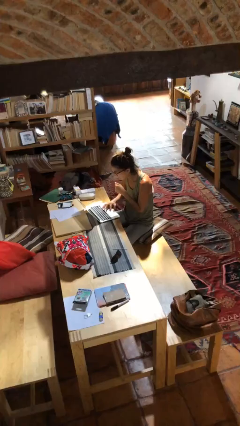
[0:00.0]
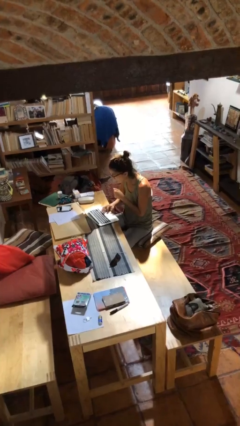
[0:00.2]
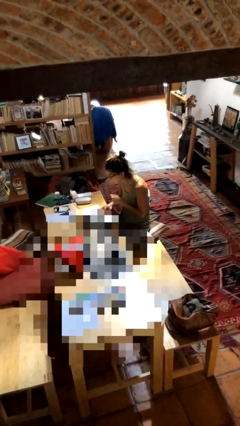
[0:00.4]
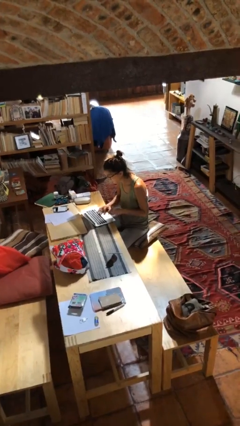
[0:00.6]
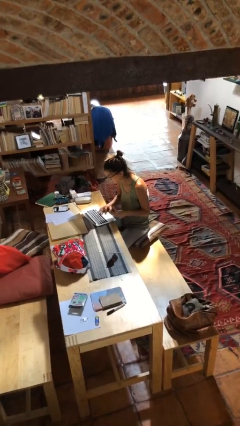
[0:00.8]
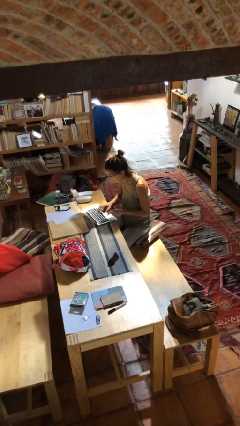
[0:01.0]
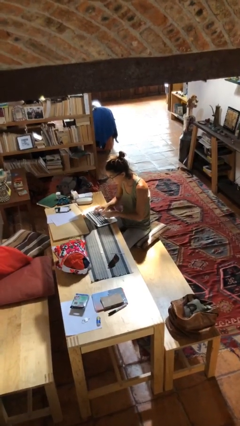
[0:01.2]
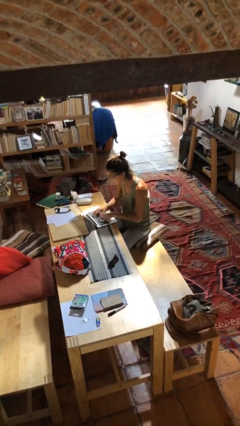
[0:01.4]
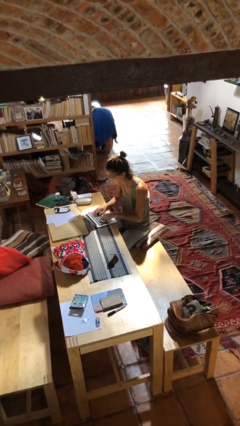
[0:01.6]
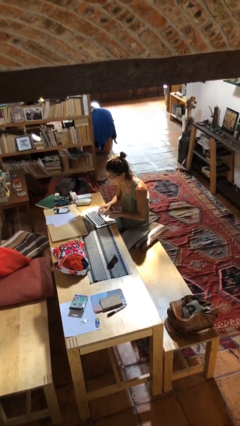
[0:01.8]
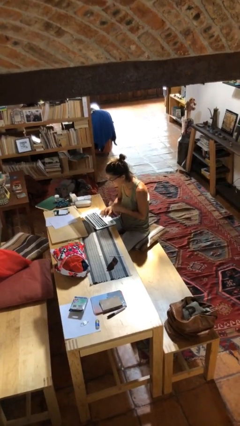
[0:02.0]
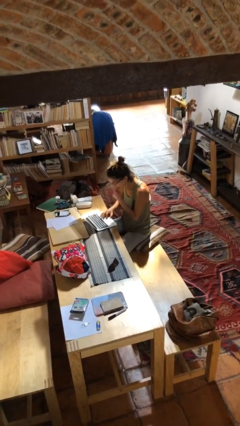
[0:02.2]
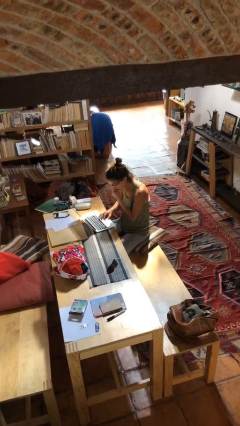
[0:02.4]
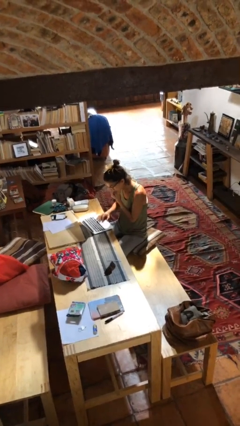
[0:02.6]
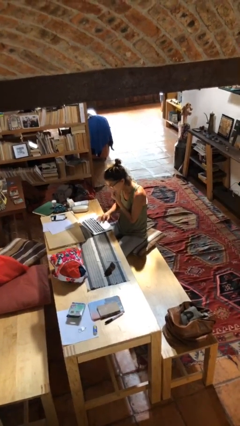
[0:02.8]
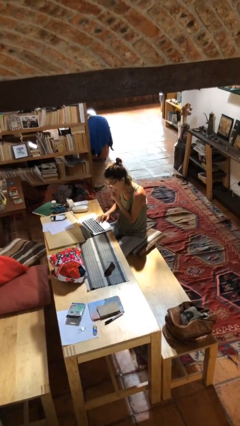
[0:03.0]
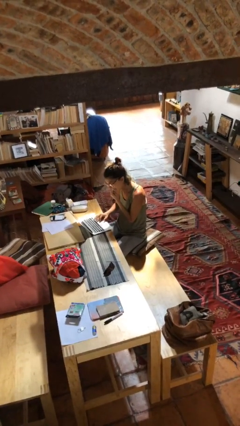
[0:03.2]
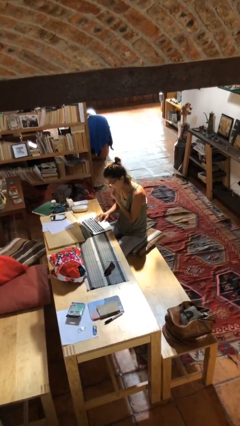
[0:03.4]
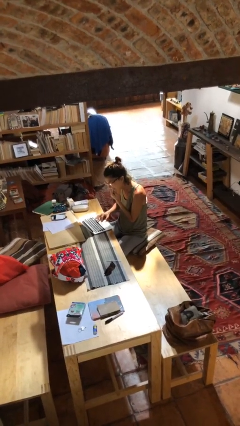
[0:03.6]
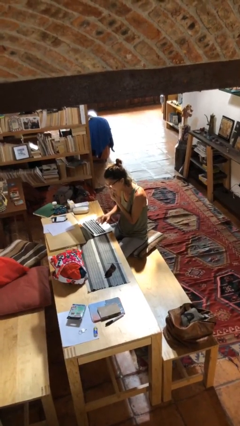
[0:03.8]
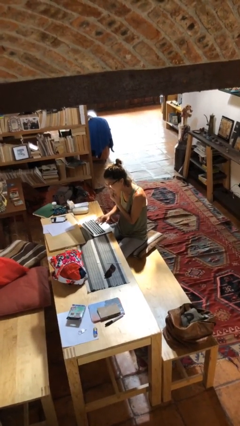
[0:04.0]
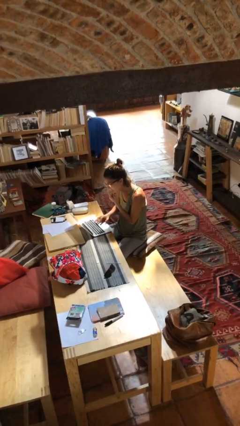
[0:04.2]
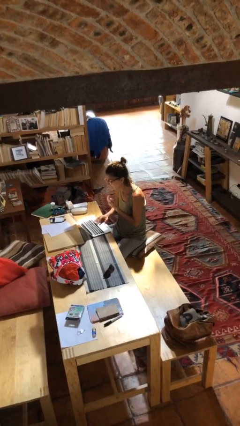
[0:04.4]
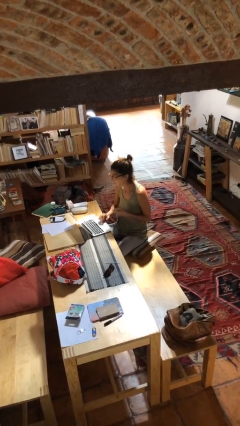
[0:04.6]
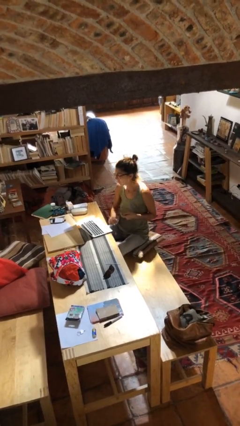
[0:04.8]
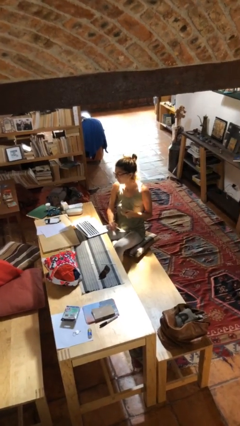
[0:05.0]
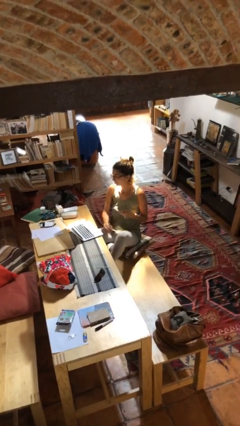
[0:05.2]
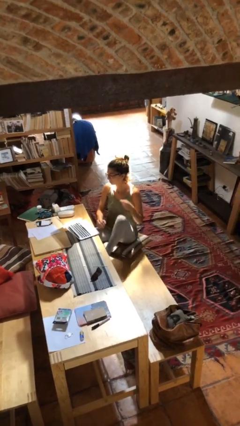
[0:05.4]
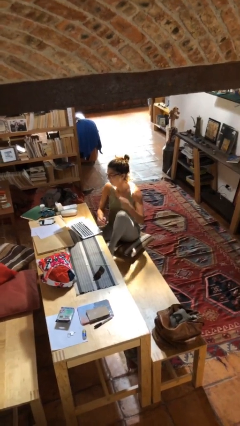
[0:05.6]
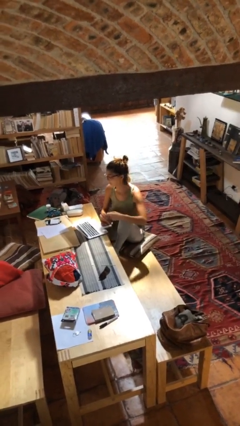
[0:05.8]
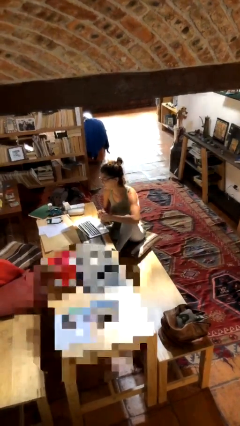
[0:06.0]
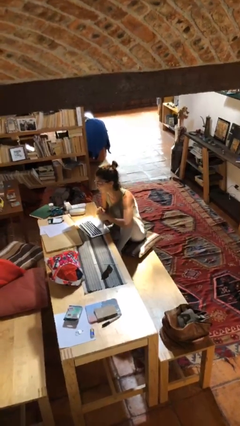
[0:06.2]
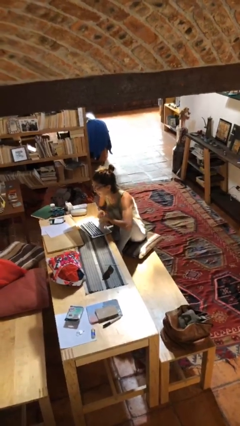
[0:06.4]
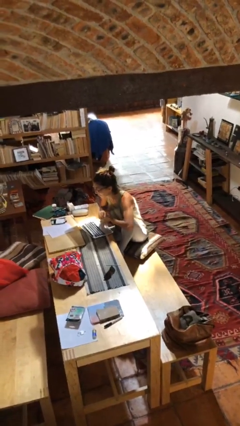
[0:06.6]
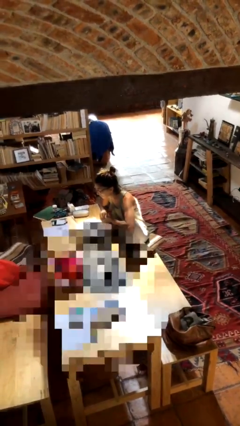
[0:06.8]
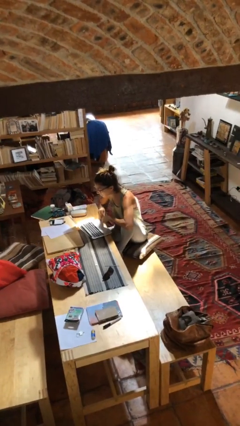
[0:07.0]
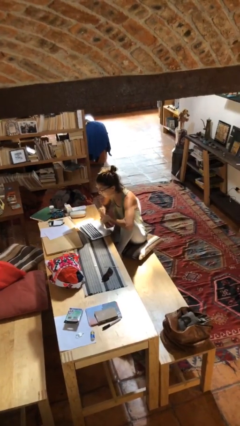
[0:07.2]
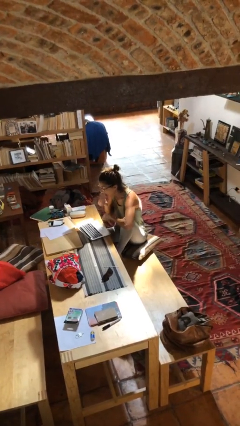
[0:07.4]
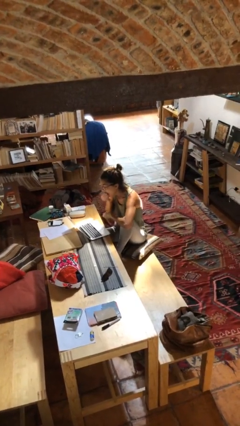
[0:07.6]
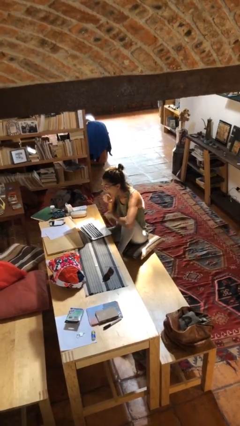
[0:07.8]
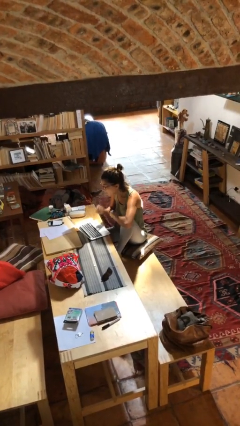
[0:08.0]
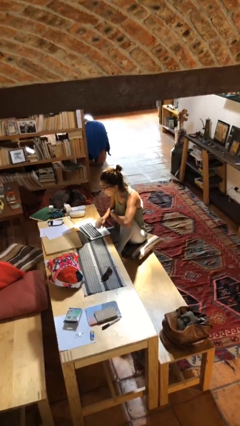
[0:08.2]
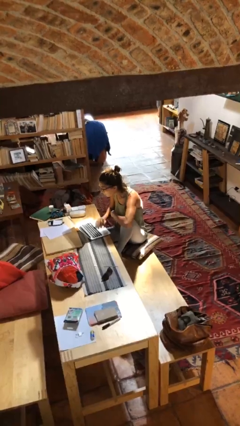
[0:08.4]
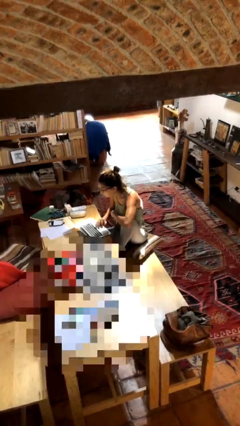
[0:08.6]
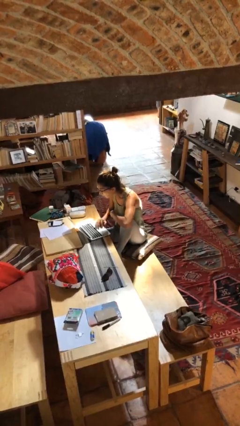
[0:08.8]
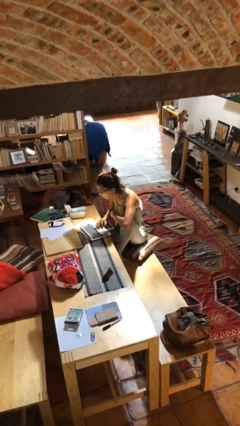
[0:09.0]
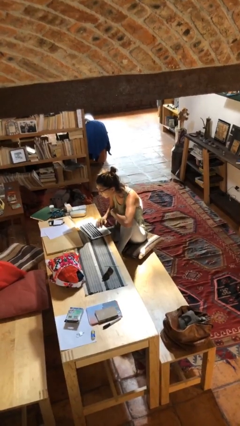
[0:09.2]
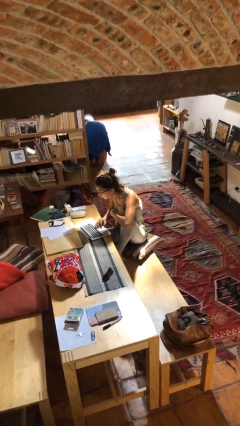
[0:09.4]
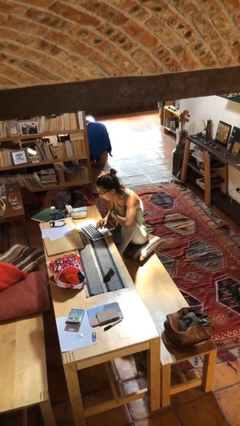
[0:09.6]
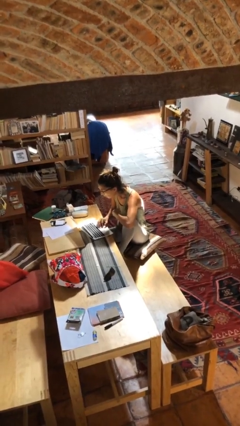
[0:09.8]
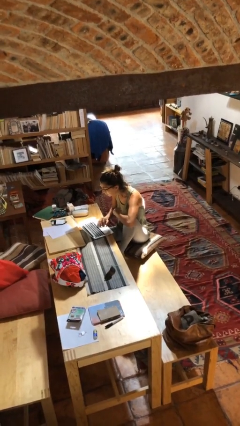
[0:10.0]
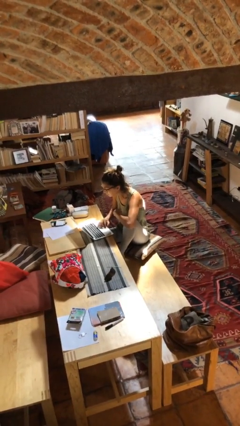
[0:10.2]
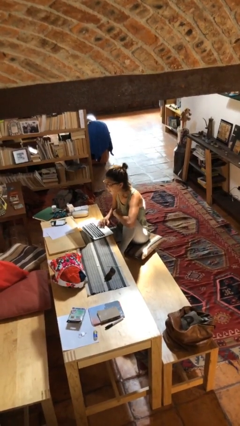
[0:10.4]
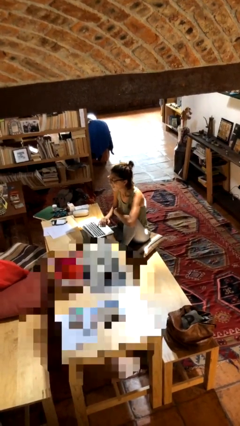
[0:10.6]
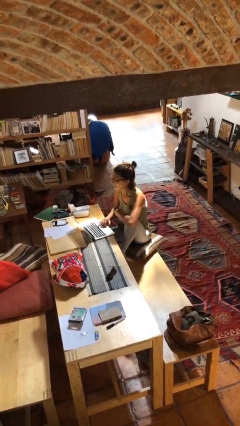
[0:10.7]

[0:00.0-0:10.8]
person interacts with laptop

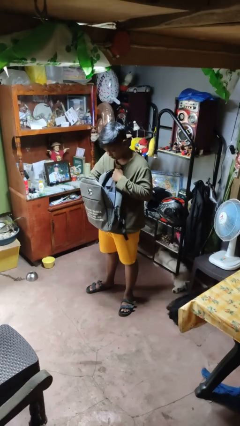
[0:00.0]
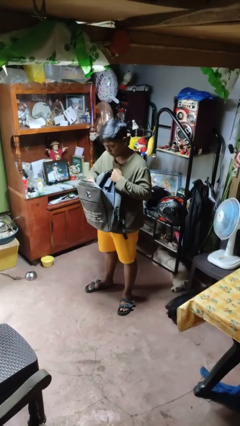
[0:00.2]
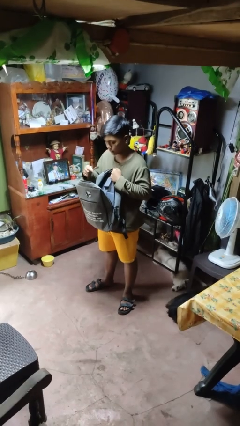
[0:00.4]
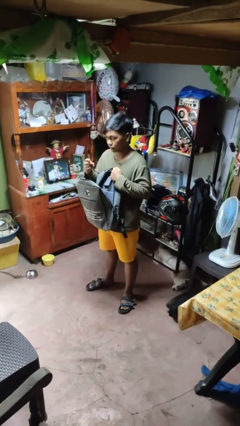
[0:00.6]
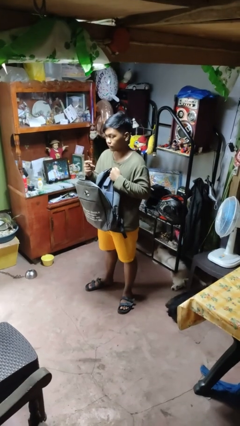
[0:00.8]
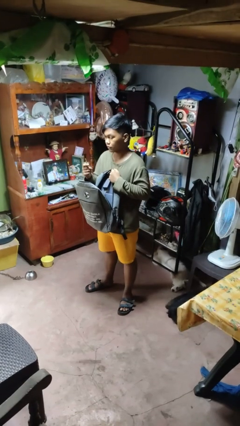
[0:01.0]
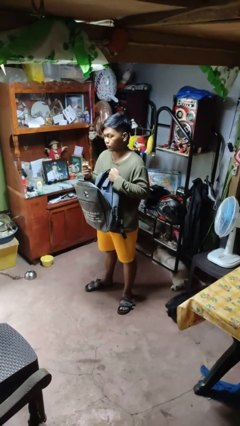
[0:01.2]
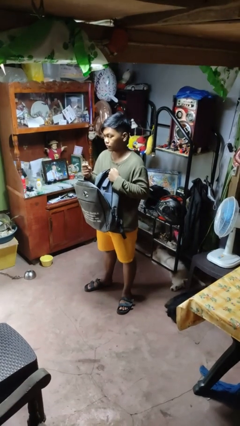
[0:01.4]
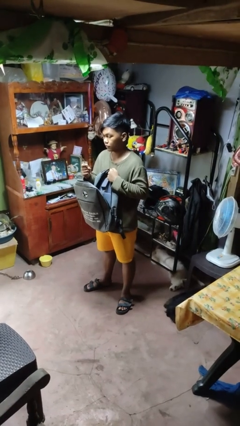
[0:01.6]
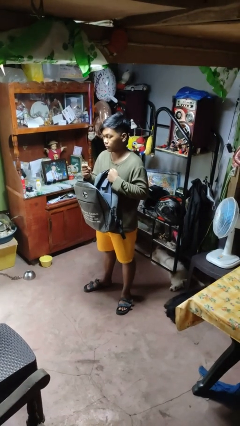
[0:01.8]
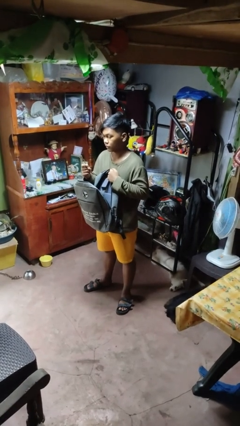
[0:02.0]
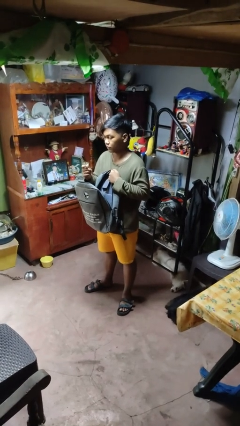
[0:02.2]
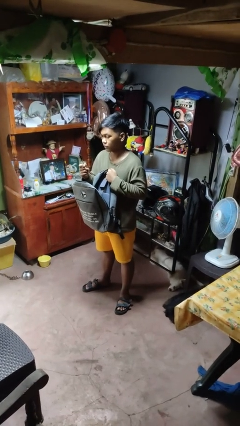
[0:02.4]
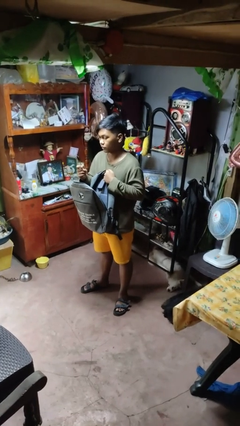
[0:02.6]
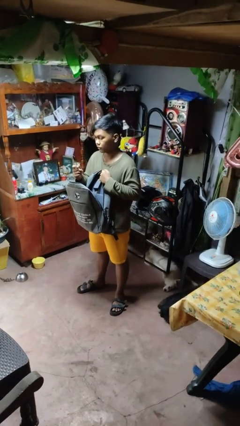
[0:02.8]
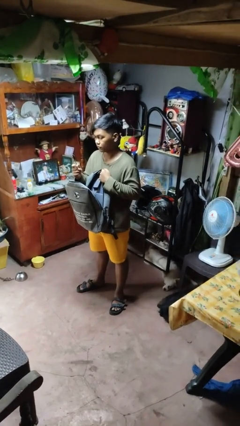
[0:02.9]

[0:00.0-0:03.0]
person takes object from backpack

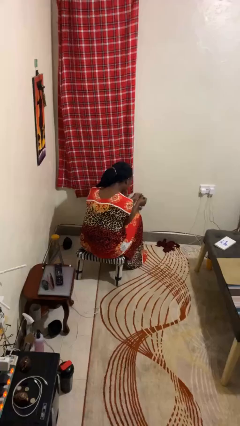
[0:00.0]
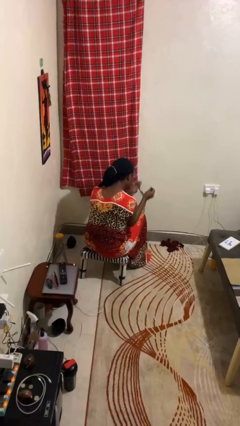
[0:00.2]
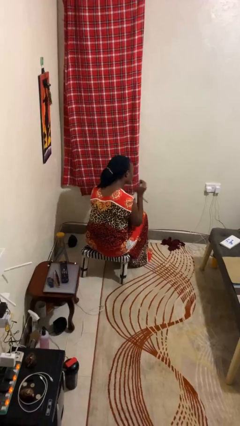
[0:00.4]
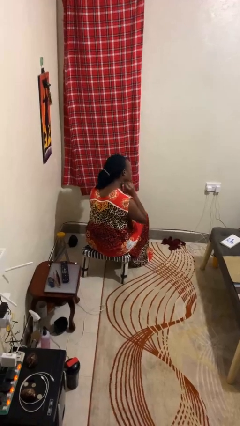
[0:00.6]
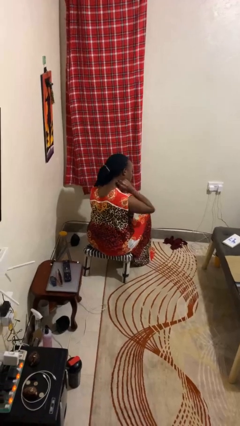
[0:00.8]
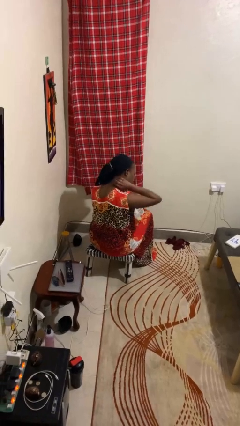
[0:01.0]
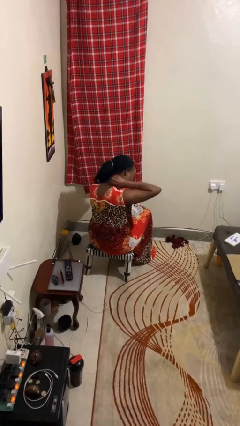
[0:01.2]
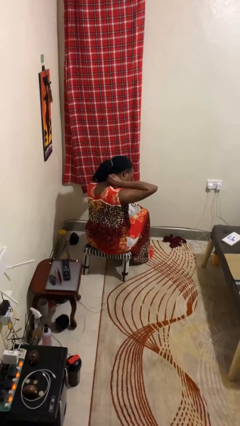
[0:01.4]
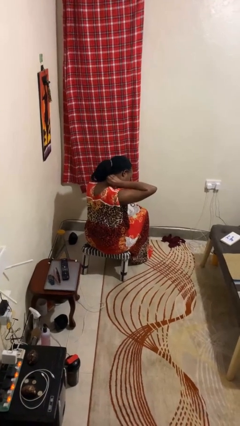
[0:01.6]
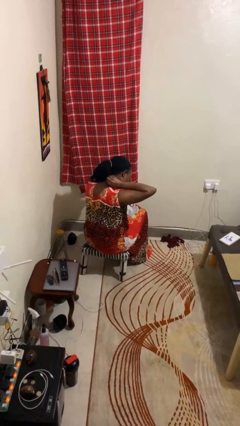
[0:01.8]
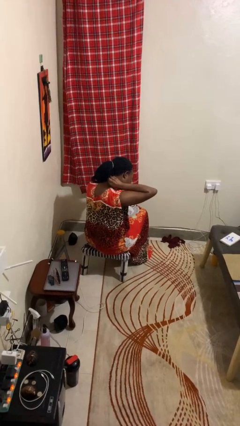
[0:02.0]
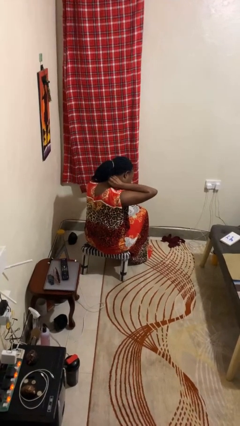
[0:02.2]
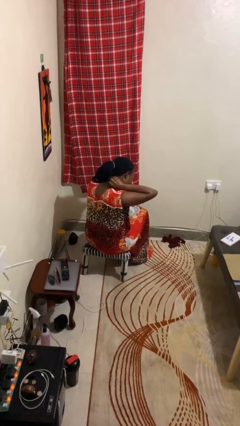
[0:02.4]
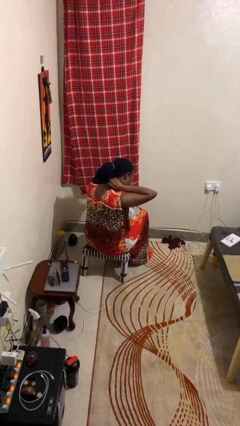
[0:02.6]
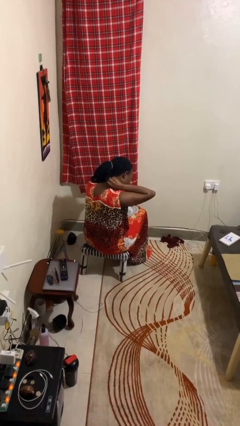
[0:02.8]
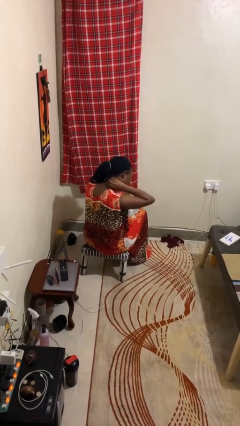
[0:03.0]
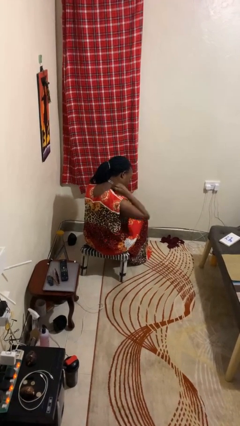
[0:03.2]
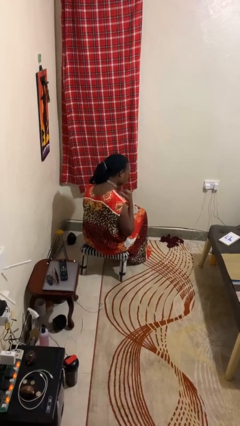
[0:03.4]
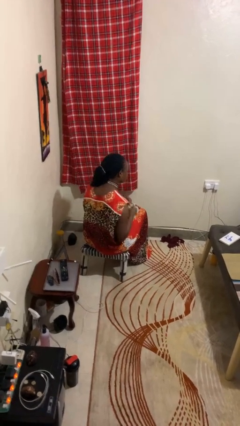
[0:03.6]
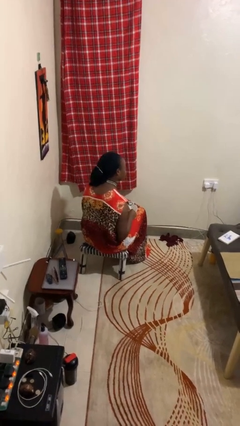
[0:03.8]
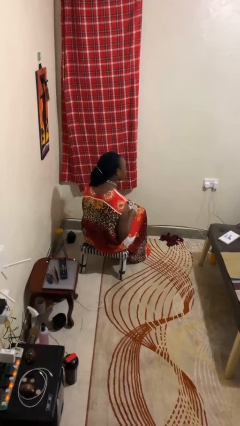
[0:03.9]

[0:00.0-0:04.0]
person puts on necklace
